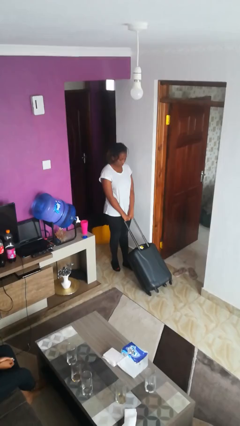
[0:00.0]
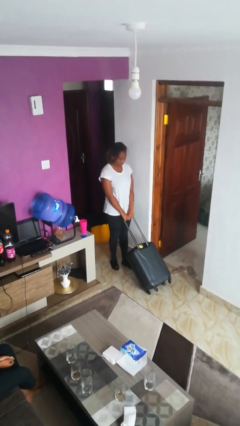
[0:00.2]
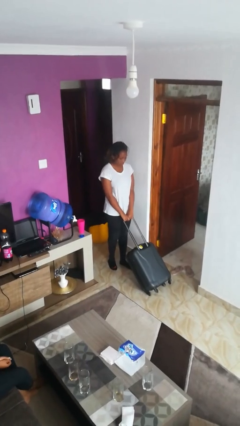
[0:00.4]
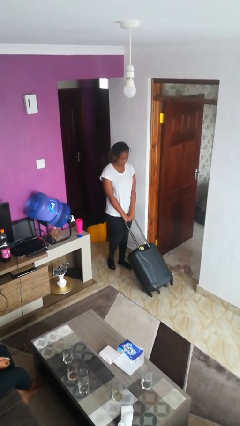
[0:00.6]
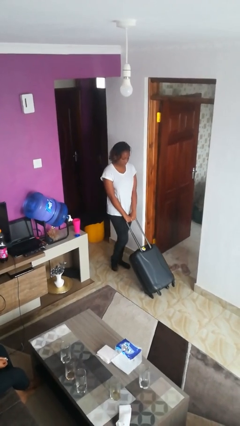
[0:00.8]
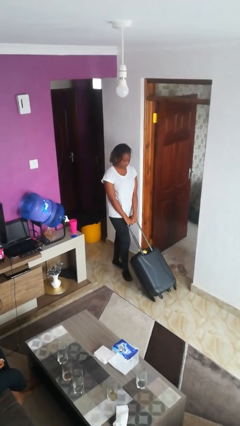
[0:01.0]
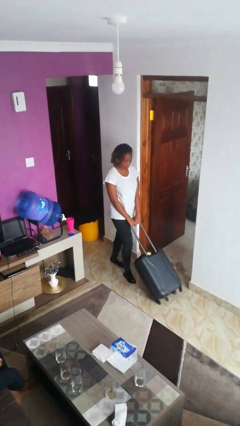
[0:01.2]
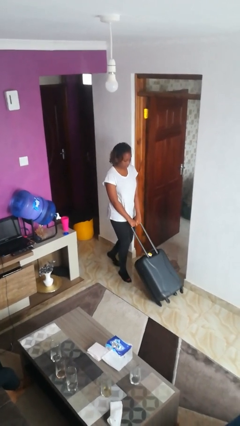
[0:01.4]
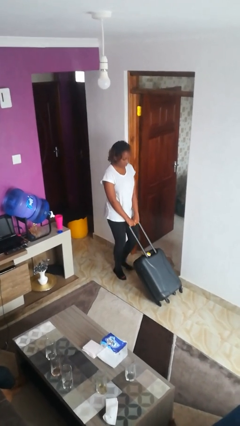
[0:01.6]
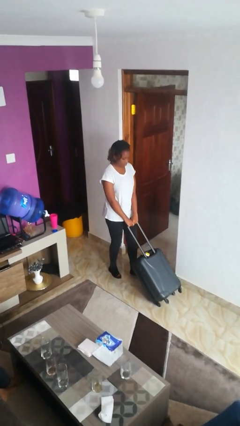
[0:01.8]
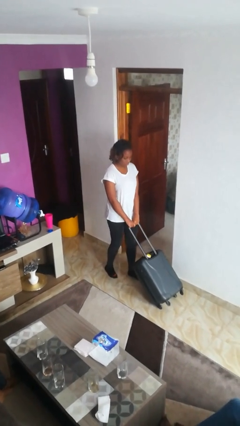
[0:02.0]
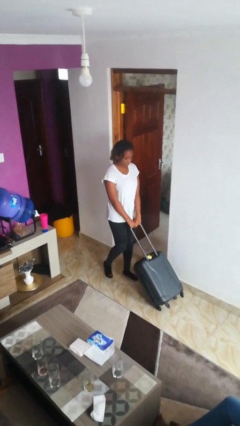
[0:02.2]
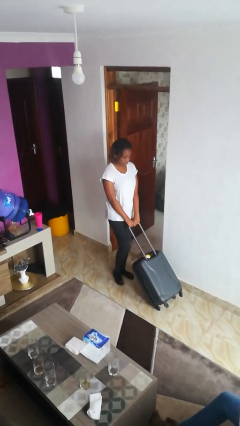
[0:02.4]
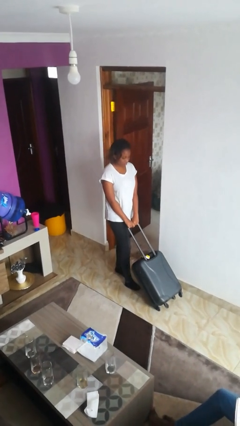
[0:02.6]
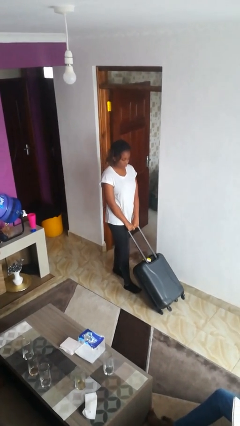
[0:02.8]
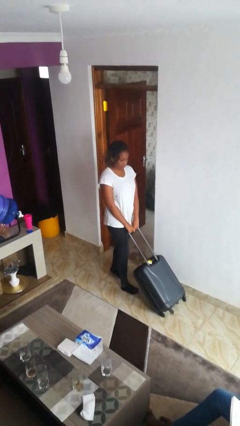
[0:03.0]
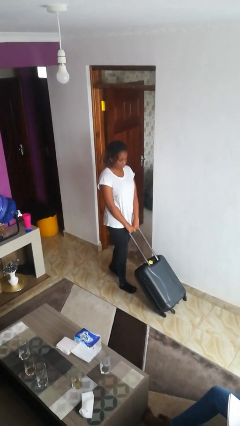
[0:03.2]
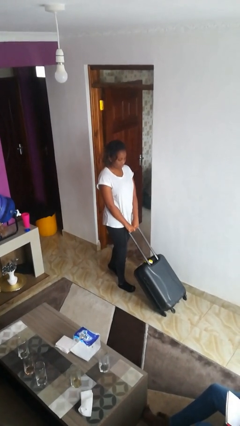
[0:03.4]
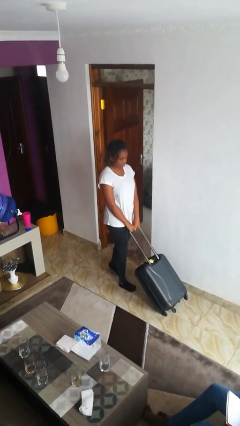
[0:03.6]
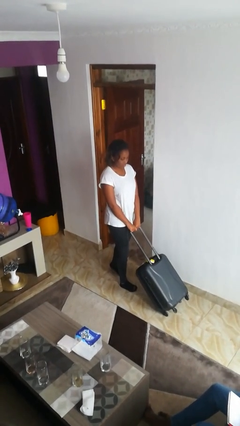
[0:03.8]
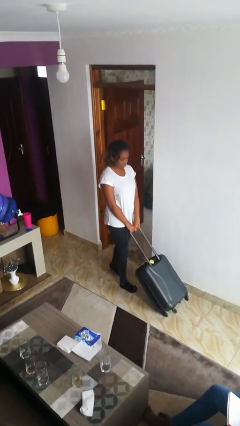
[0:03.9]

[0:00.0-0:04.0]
person pushes wheeled cart

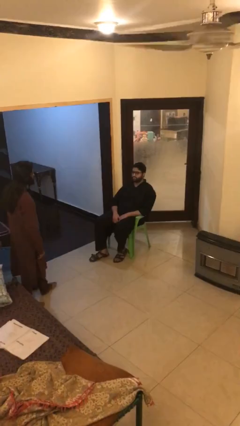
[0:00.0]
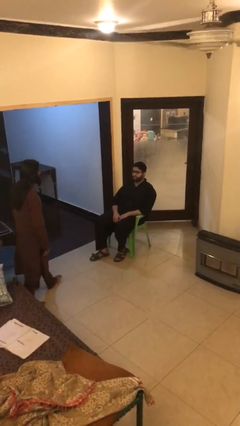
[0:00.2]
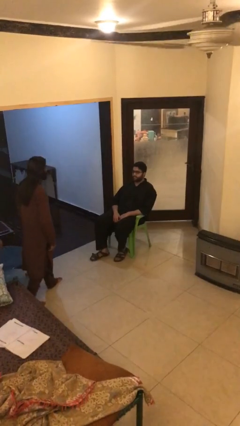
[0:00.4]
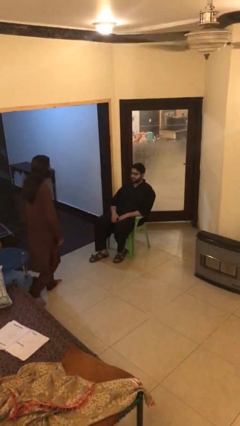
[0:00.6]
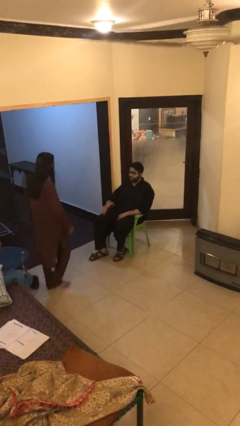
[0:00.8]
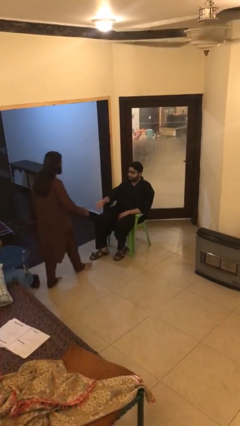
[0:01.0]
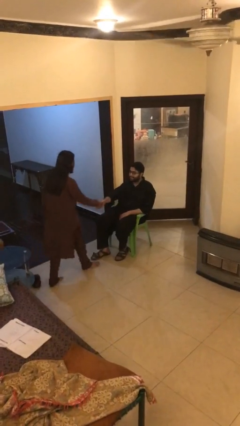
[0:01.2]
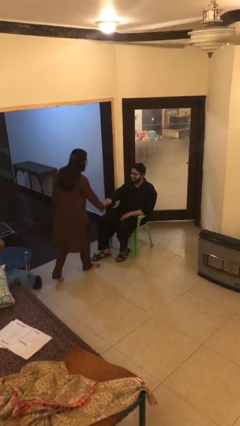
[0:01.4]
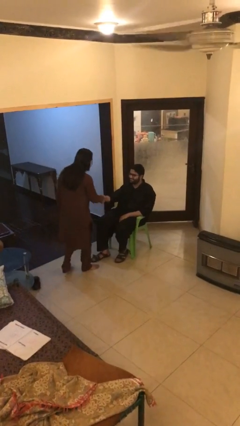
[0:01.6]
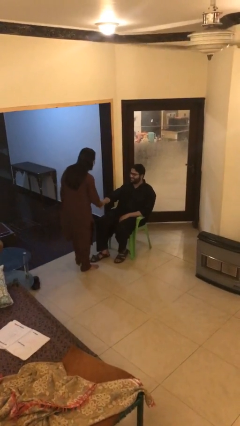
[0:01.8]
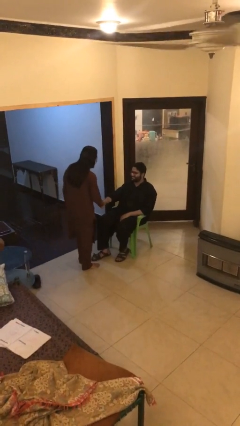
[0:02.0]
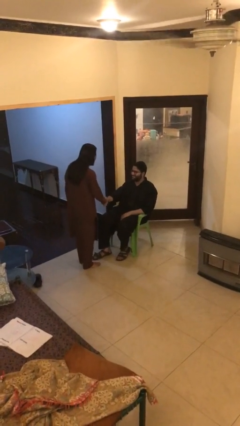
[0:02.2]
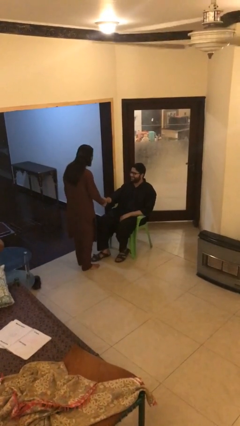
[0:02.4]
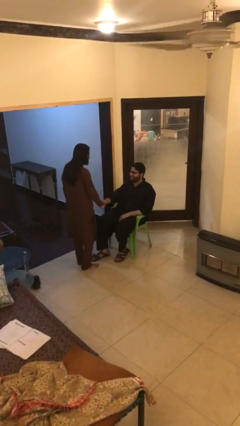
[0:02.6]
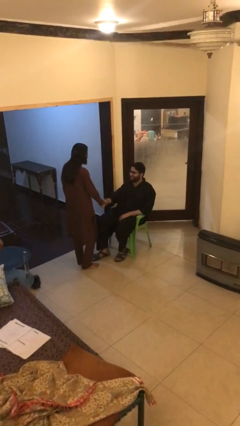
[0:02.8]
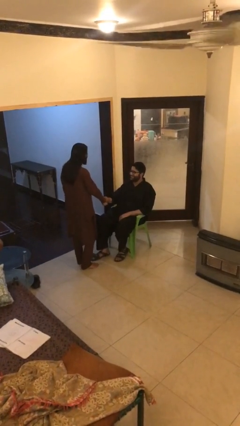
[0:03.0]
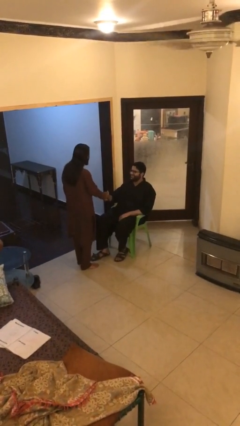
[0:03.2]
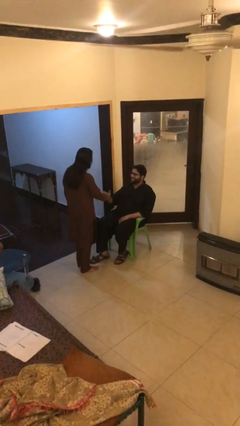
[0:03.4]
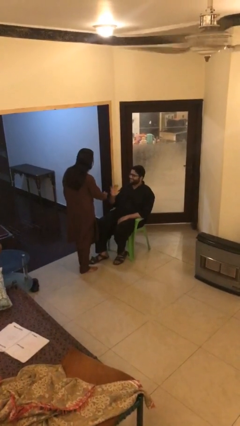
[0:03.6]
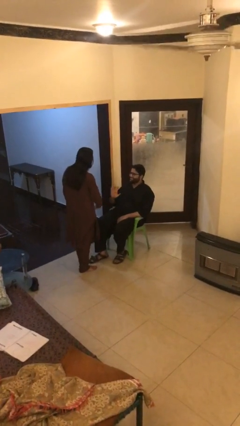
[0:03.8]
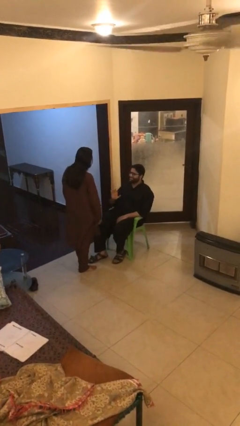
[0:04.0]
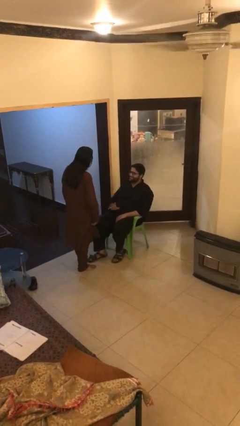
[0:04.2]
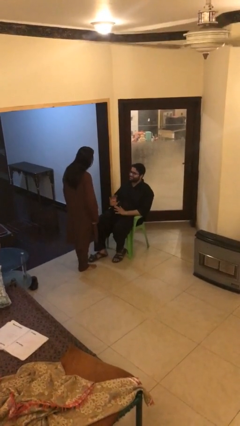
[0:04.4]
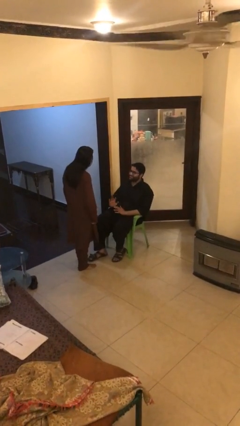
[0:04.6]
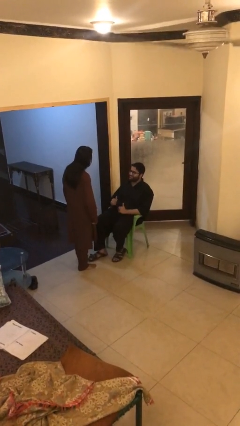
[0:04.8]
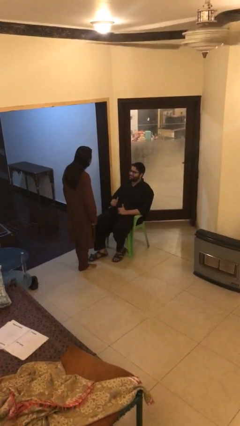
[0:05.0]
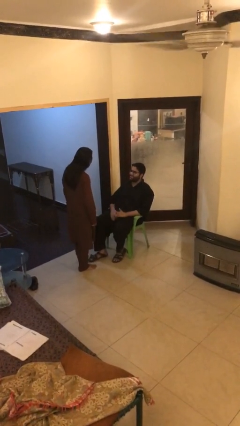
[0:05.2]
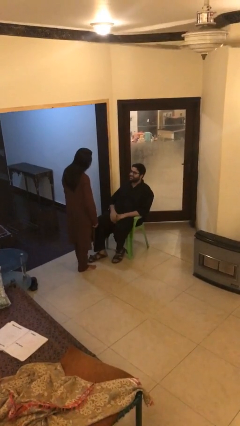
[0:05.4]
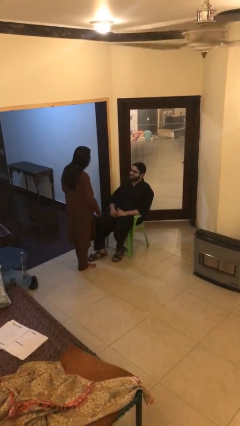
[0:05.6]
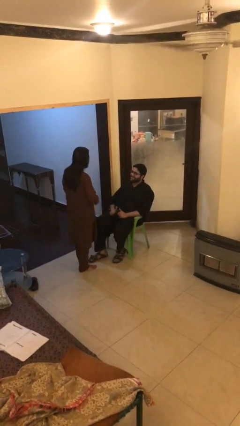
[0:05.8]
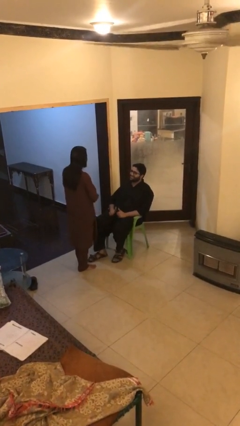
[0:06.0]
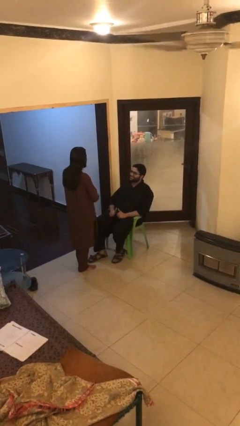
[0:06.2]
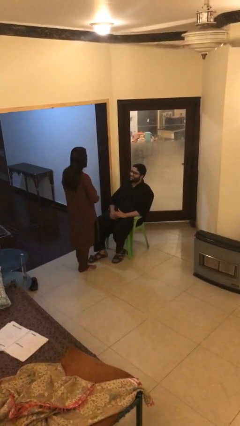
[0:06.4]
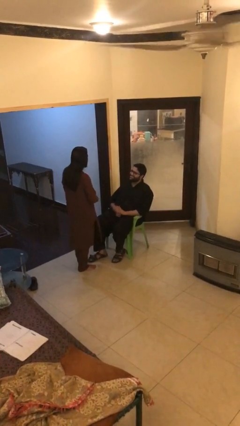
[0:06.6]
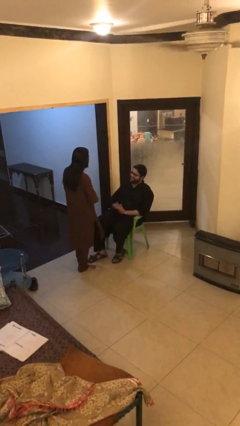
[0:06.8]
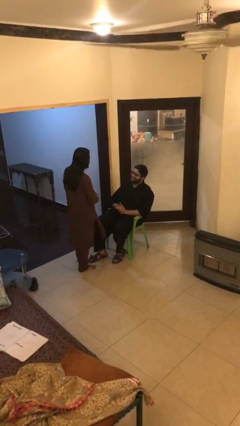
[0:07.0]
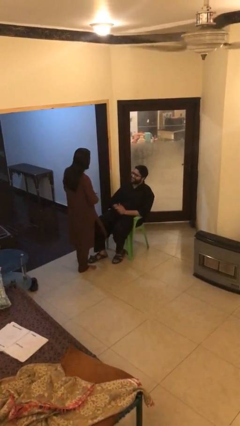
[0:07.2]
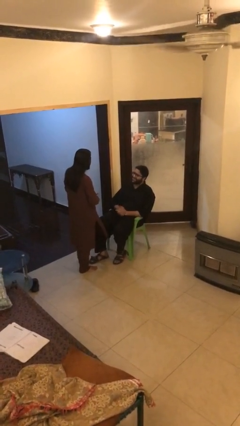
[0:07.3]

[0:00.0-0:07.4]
person shakes hand

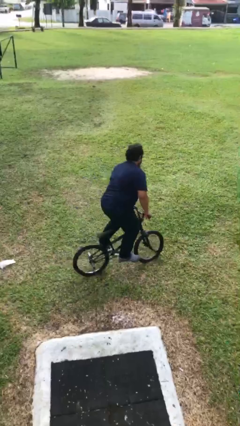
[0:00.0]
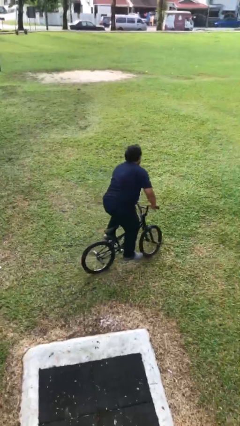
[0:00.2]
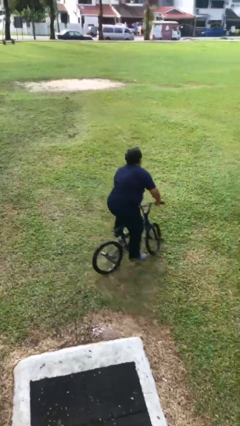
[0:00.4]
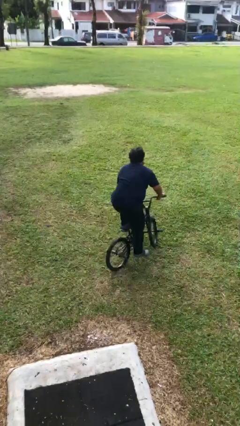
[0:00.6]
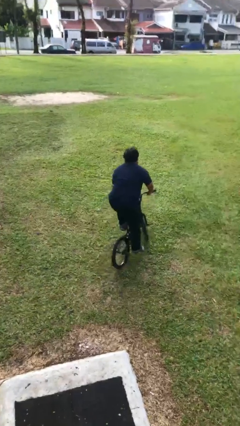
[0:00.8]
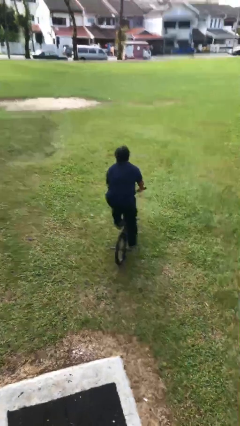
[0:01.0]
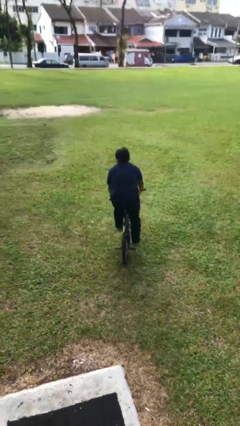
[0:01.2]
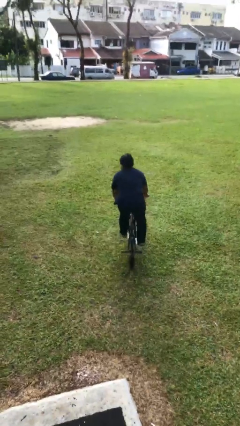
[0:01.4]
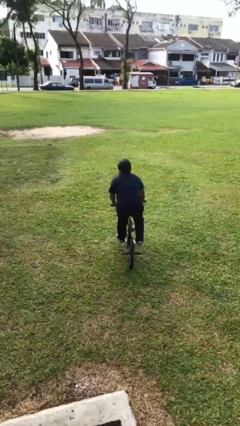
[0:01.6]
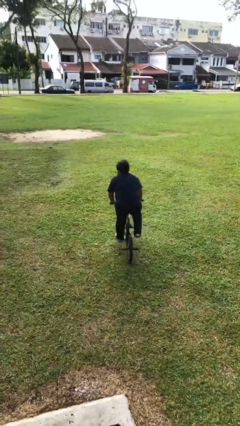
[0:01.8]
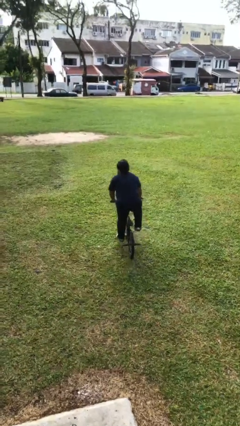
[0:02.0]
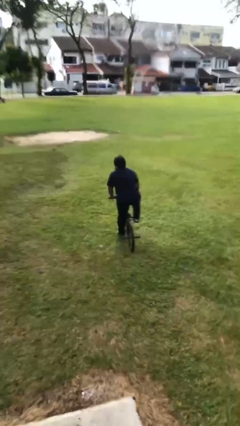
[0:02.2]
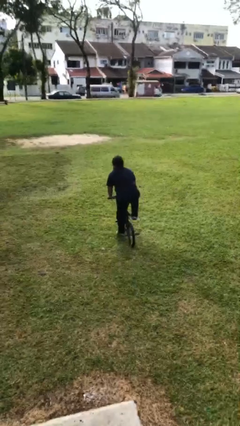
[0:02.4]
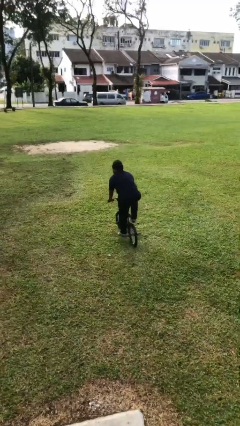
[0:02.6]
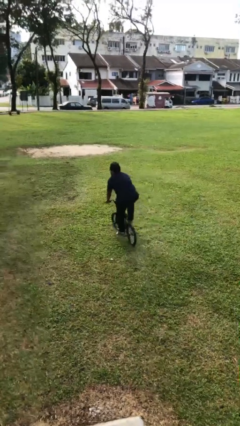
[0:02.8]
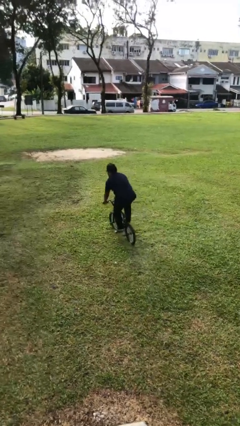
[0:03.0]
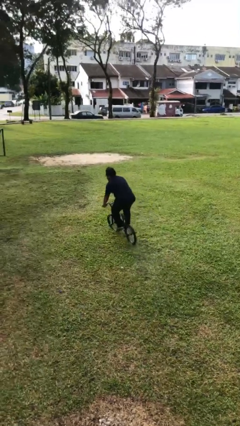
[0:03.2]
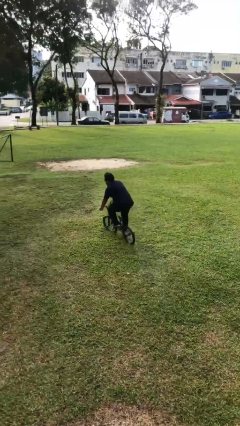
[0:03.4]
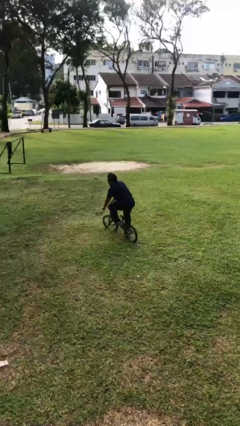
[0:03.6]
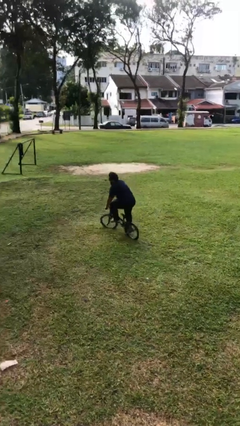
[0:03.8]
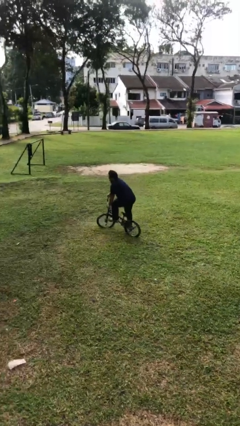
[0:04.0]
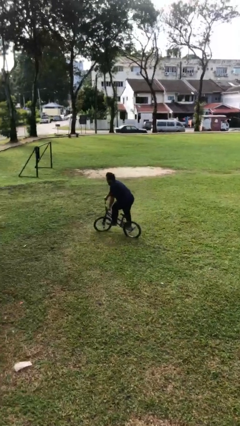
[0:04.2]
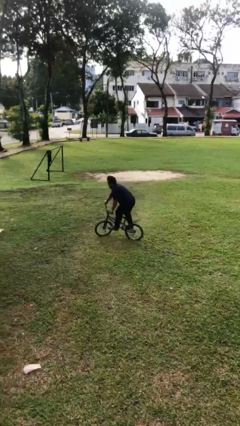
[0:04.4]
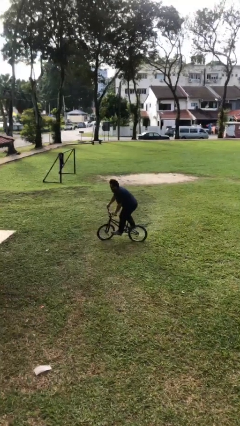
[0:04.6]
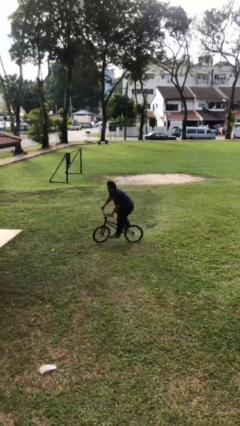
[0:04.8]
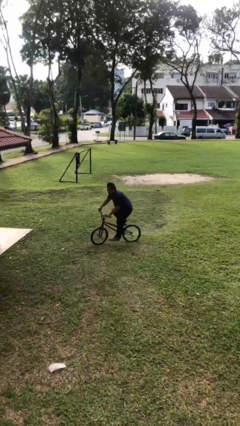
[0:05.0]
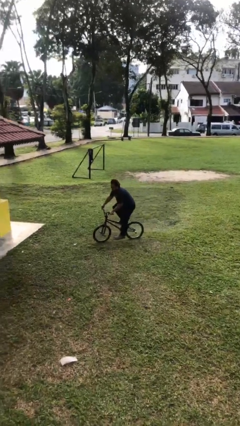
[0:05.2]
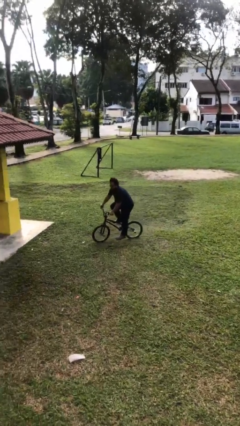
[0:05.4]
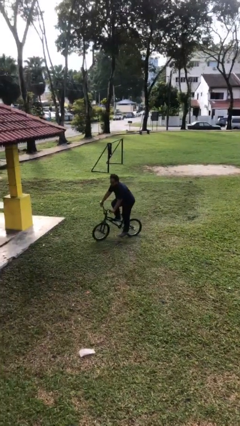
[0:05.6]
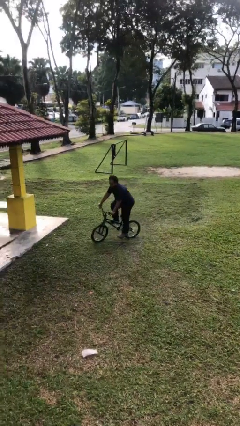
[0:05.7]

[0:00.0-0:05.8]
person rides bicycle

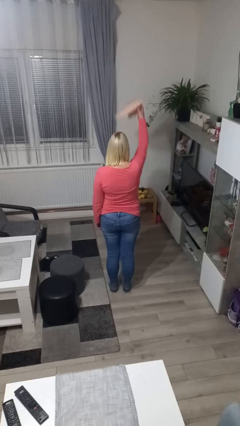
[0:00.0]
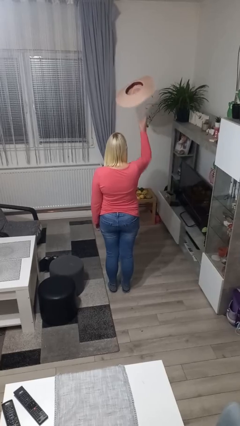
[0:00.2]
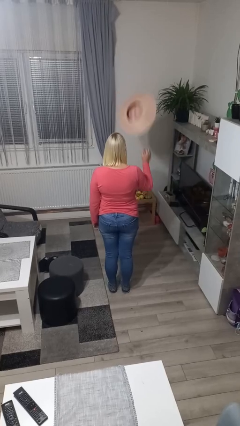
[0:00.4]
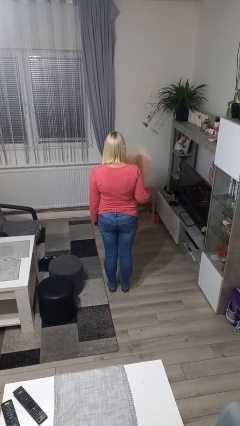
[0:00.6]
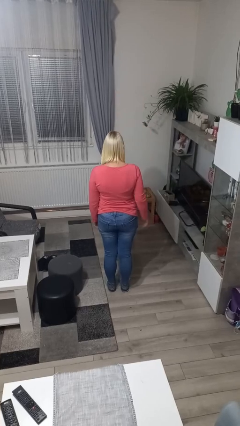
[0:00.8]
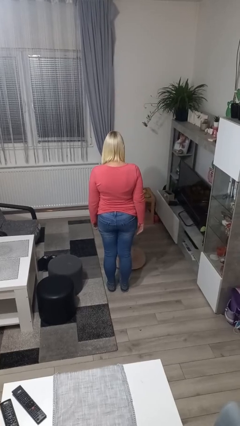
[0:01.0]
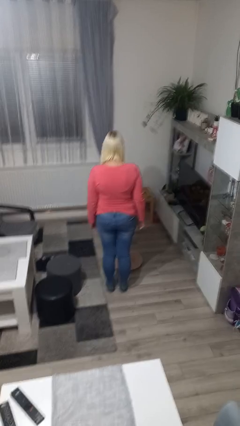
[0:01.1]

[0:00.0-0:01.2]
person throws object into air
